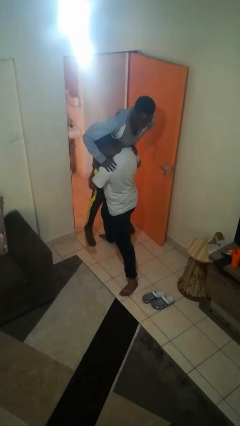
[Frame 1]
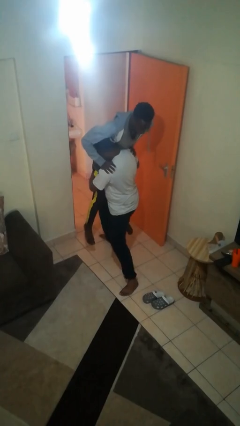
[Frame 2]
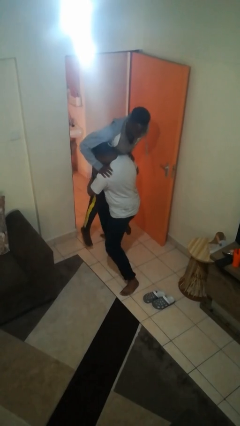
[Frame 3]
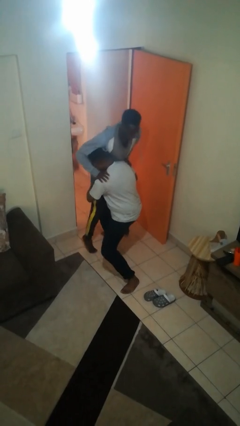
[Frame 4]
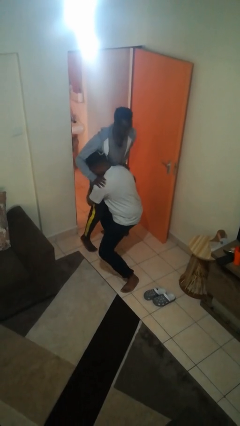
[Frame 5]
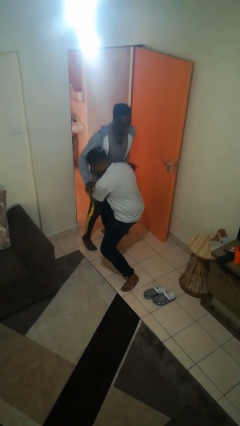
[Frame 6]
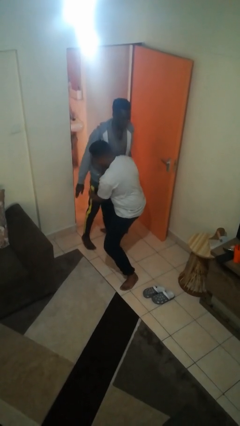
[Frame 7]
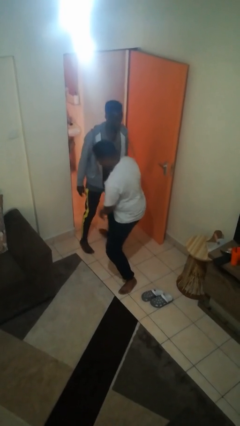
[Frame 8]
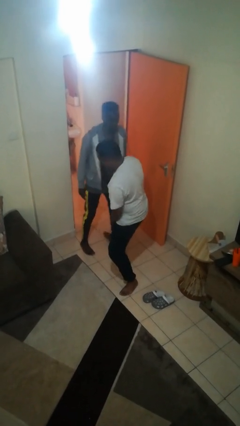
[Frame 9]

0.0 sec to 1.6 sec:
person puts down person

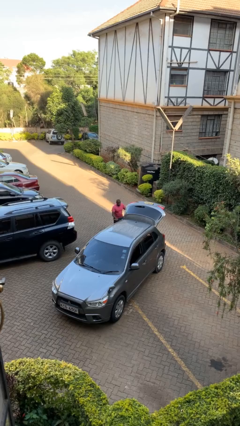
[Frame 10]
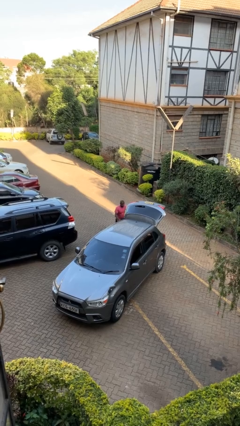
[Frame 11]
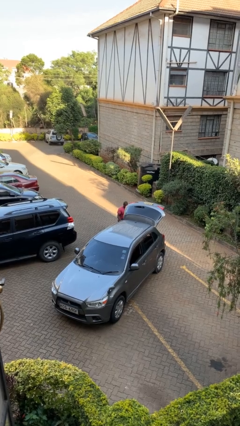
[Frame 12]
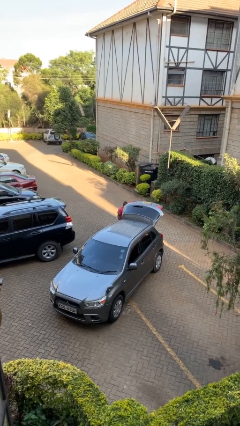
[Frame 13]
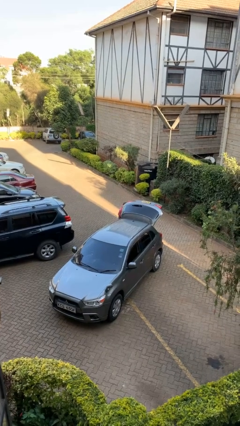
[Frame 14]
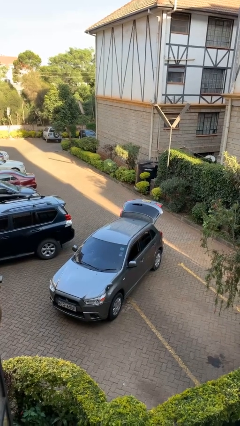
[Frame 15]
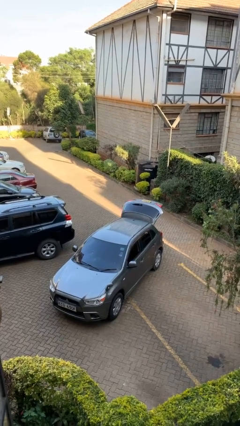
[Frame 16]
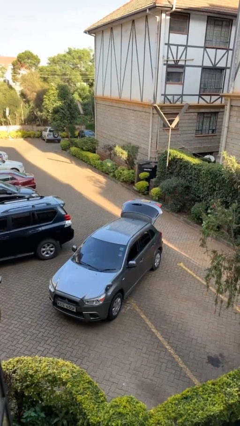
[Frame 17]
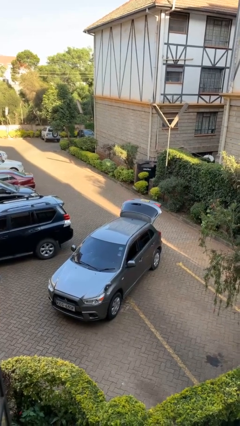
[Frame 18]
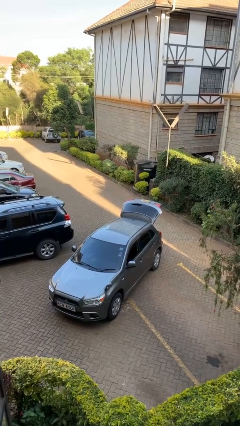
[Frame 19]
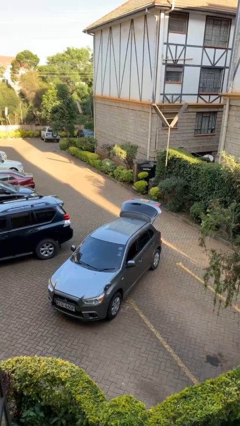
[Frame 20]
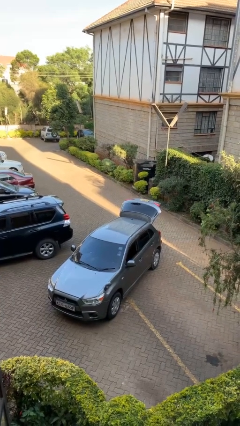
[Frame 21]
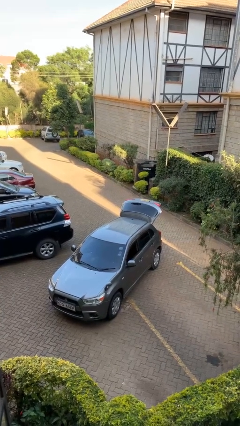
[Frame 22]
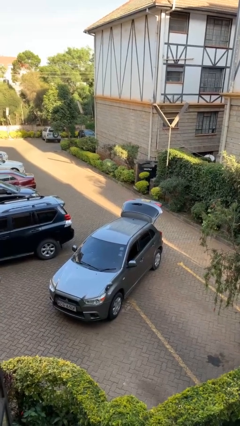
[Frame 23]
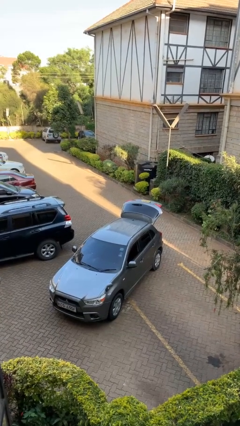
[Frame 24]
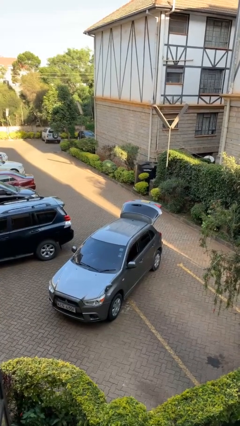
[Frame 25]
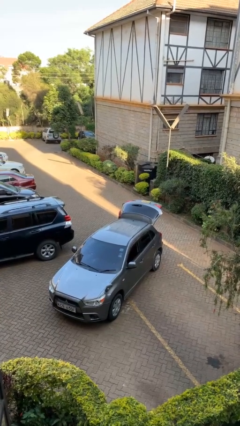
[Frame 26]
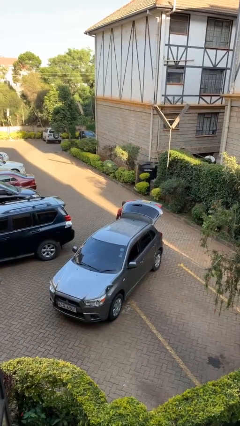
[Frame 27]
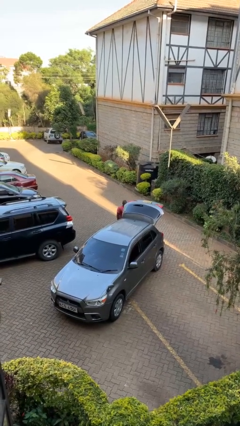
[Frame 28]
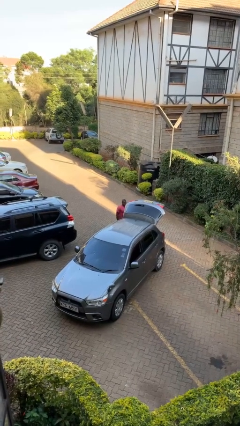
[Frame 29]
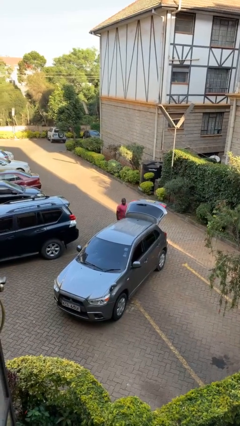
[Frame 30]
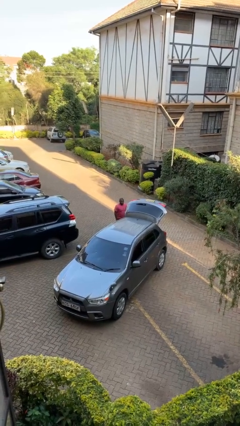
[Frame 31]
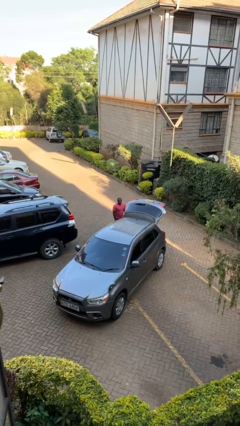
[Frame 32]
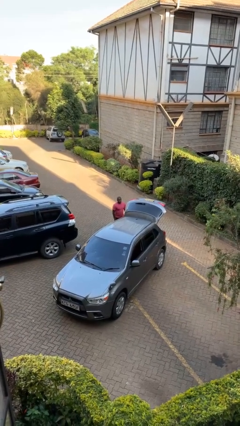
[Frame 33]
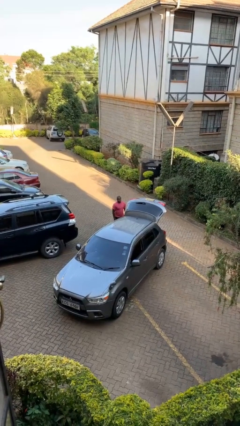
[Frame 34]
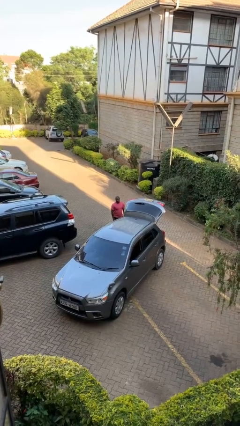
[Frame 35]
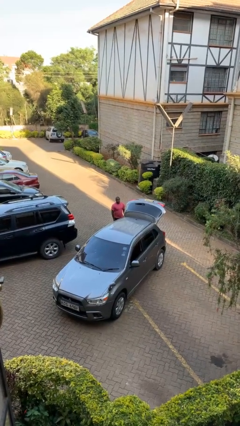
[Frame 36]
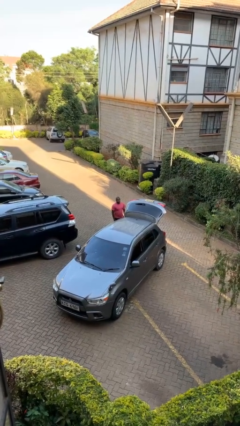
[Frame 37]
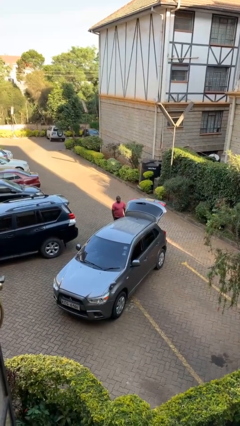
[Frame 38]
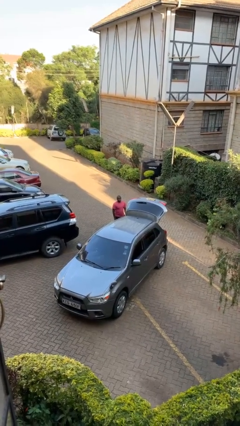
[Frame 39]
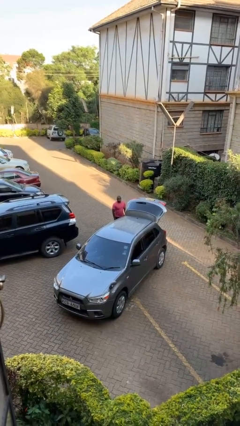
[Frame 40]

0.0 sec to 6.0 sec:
person loads car

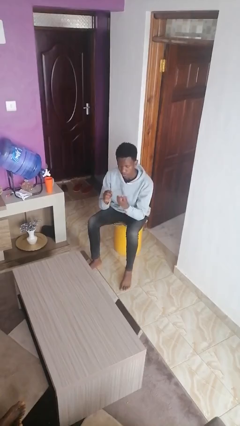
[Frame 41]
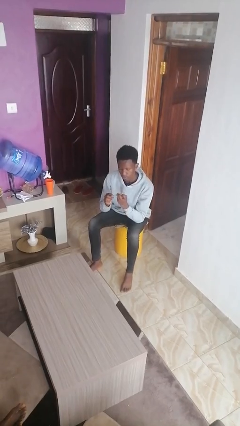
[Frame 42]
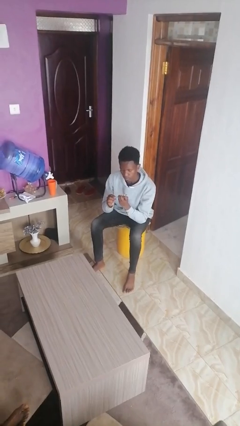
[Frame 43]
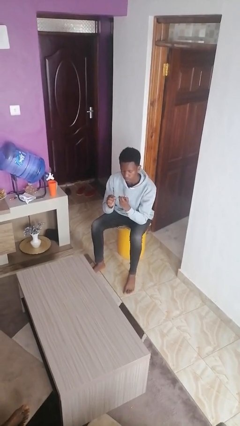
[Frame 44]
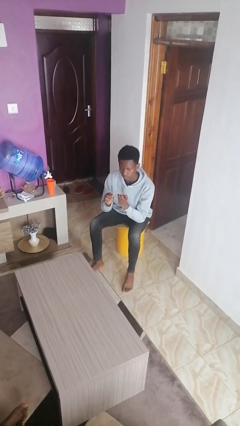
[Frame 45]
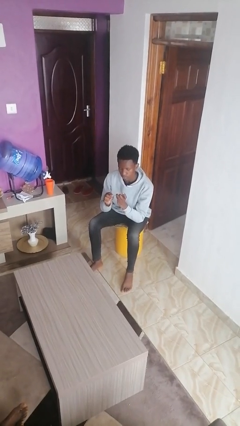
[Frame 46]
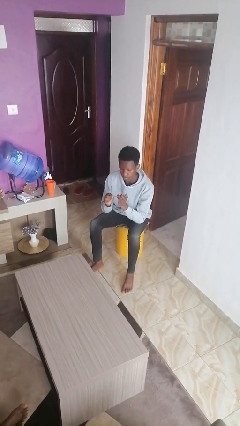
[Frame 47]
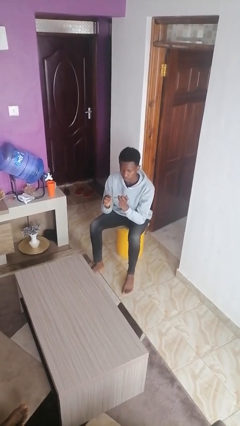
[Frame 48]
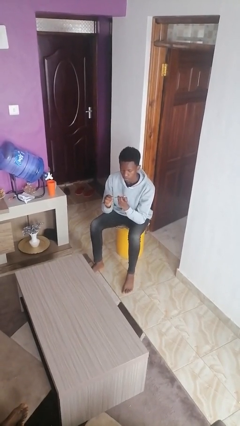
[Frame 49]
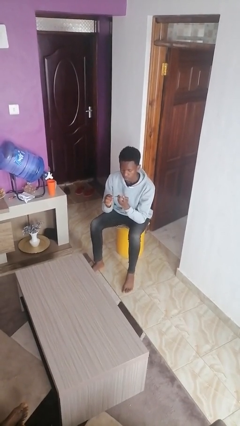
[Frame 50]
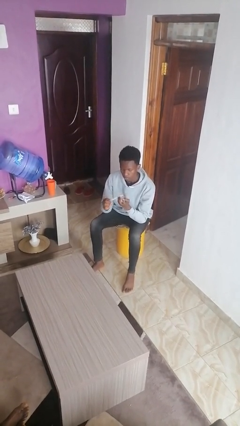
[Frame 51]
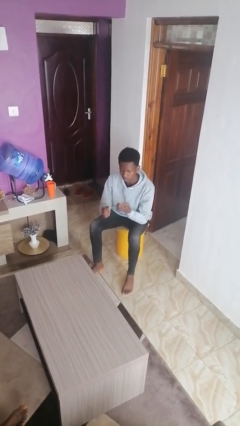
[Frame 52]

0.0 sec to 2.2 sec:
person files fingernails

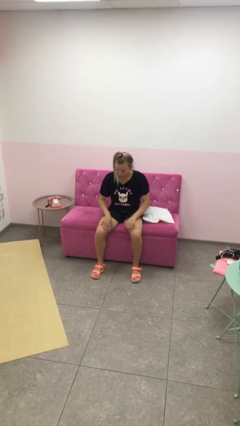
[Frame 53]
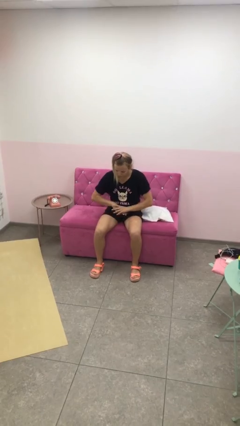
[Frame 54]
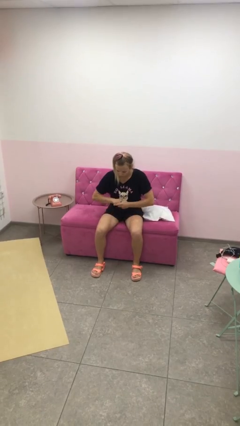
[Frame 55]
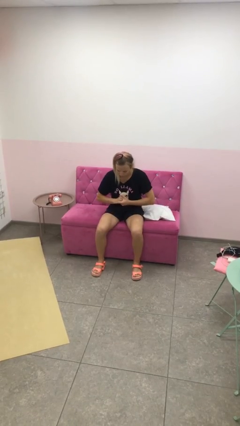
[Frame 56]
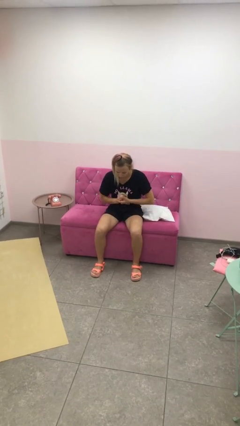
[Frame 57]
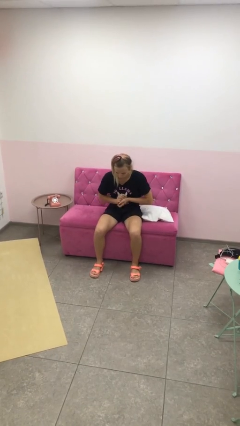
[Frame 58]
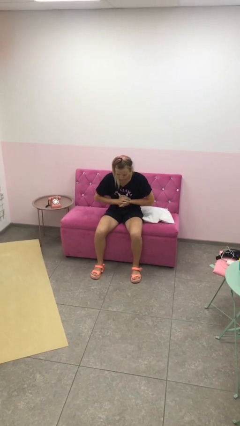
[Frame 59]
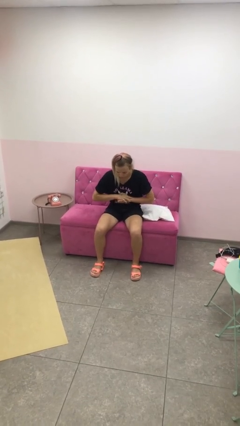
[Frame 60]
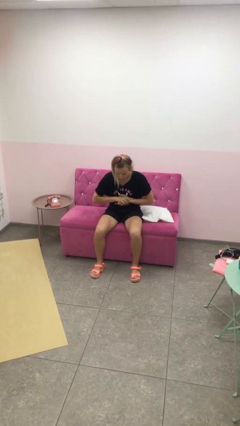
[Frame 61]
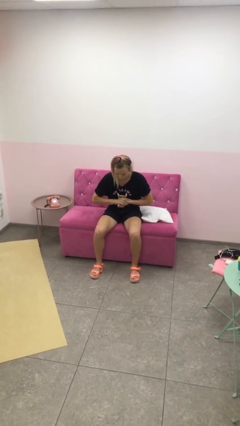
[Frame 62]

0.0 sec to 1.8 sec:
person looks at hands in lap

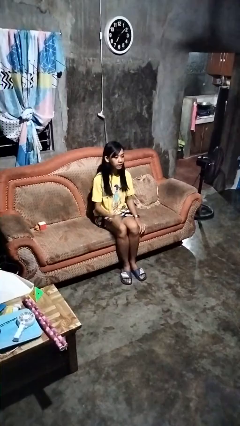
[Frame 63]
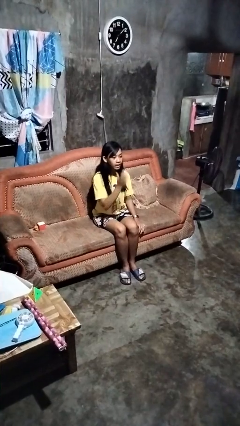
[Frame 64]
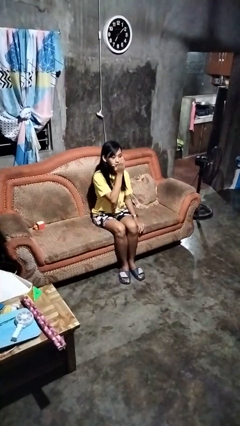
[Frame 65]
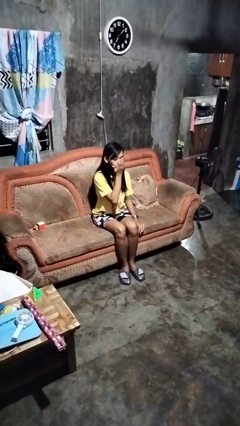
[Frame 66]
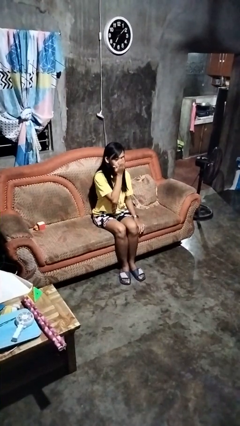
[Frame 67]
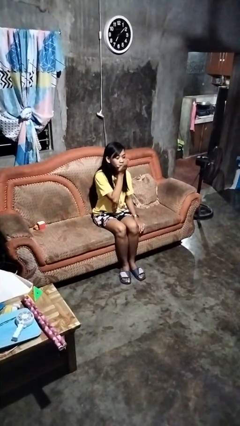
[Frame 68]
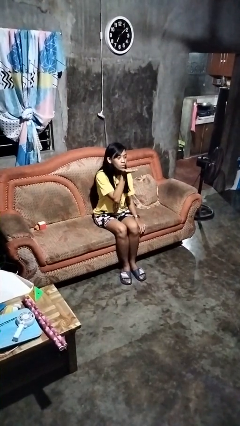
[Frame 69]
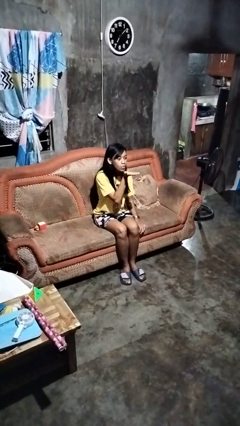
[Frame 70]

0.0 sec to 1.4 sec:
person gestures blow kiss

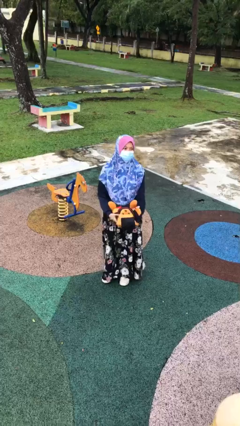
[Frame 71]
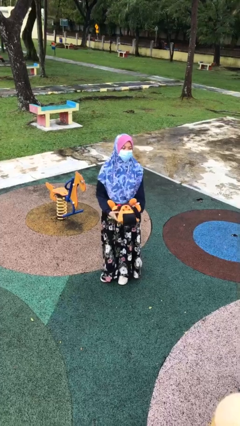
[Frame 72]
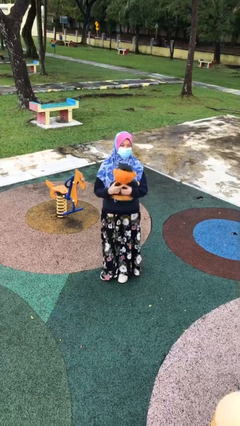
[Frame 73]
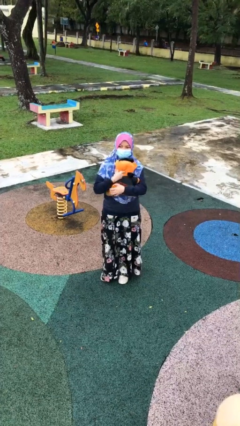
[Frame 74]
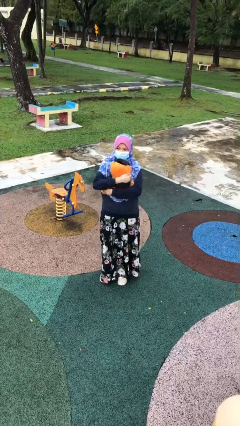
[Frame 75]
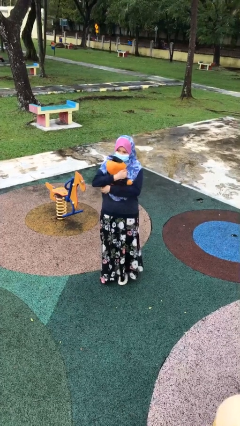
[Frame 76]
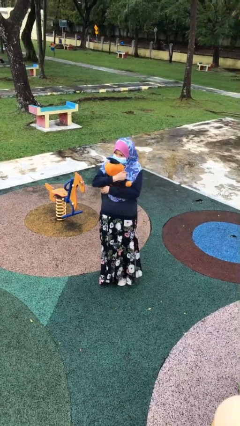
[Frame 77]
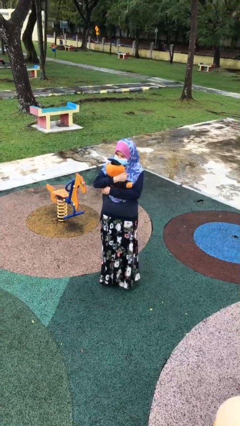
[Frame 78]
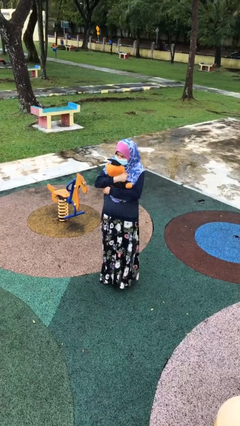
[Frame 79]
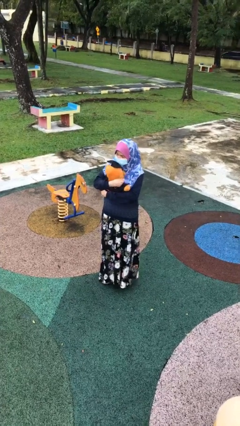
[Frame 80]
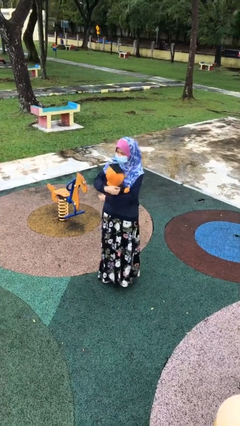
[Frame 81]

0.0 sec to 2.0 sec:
person hugs stuffed animal

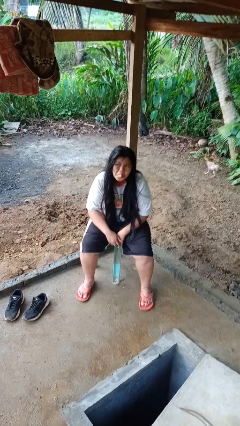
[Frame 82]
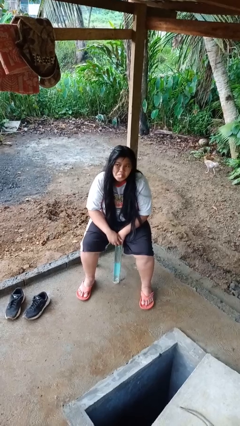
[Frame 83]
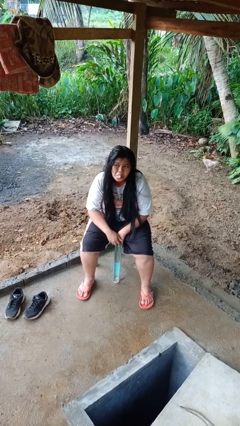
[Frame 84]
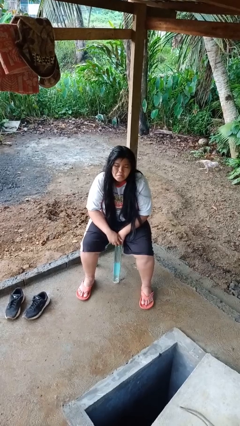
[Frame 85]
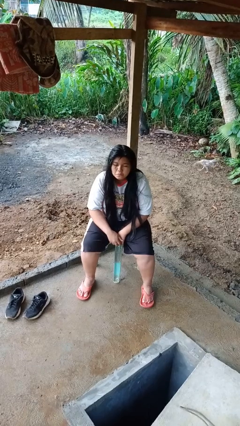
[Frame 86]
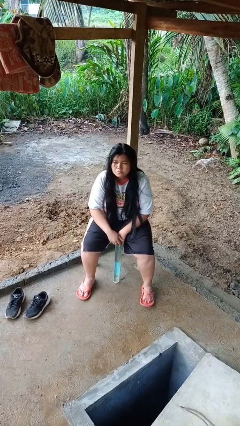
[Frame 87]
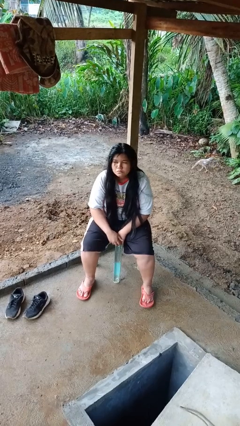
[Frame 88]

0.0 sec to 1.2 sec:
person sticks out tongue

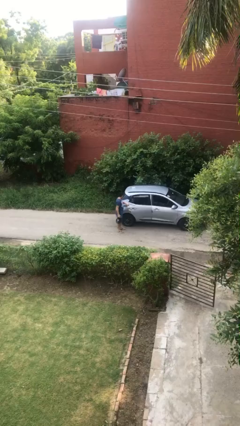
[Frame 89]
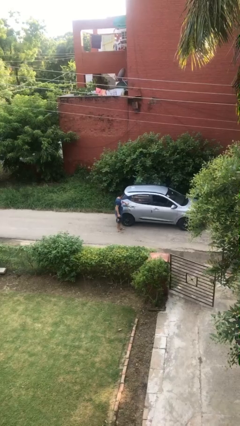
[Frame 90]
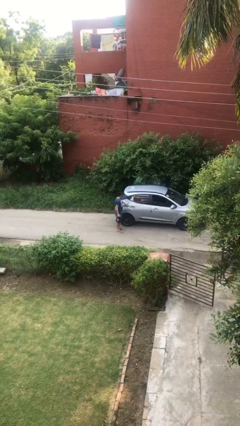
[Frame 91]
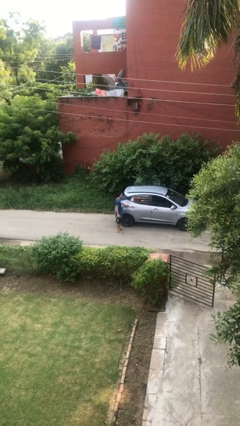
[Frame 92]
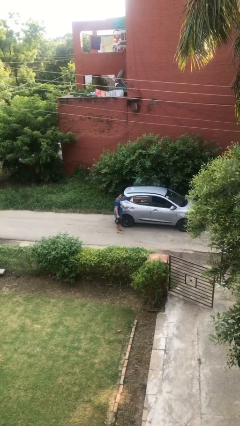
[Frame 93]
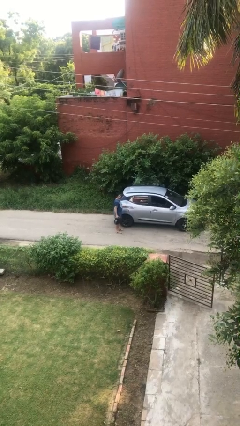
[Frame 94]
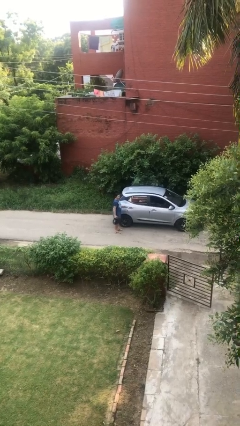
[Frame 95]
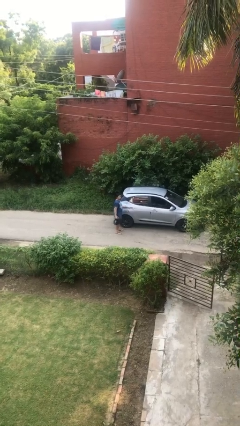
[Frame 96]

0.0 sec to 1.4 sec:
person closes car door
